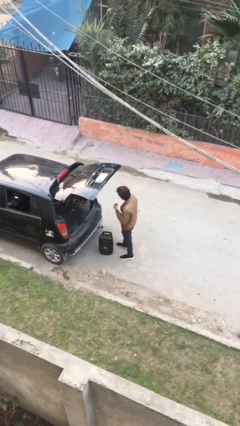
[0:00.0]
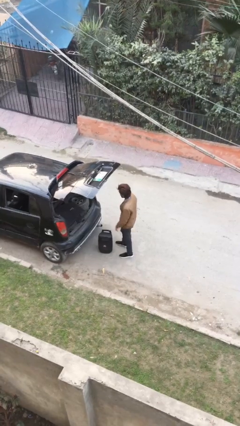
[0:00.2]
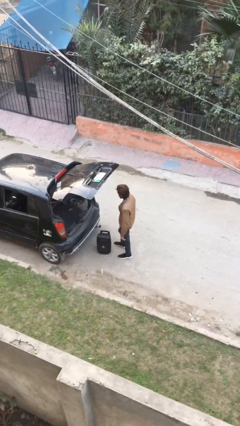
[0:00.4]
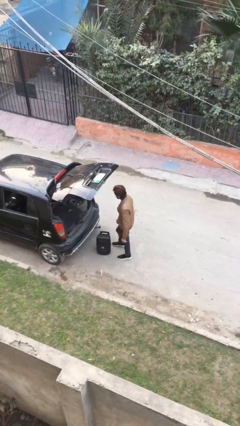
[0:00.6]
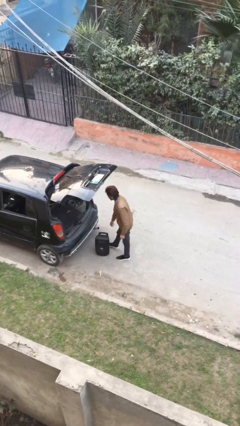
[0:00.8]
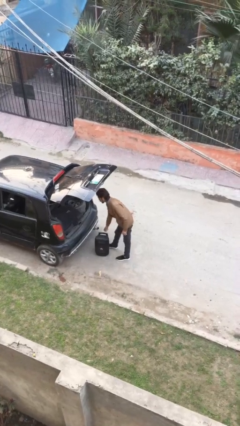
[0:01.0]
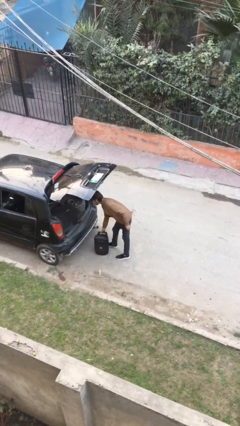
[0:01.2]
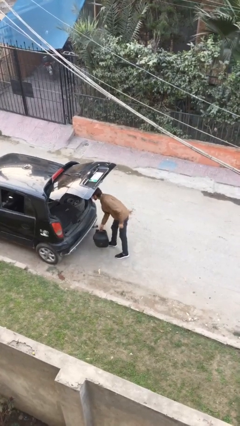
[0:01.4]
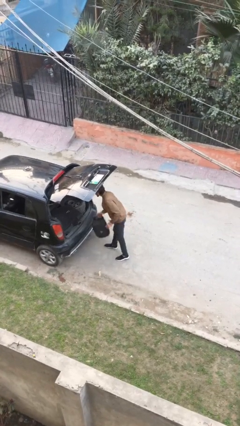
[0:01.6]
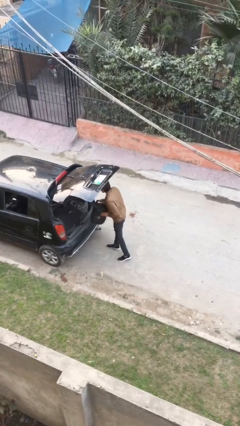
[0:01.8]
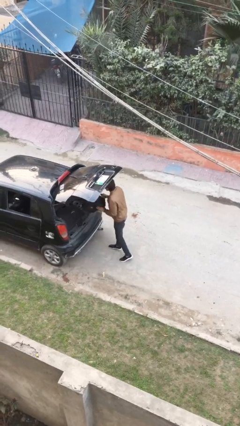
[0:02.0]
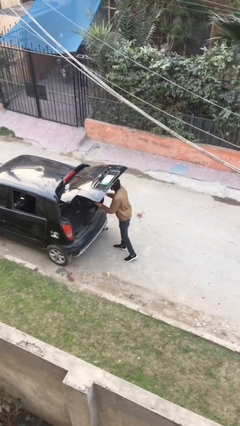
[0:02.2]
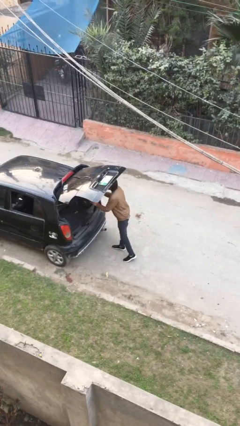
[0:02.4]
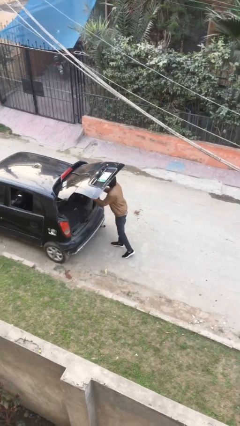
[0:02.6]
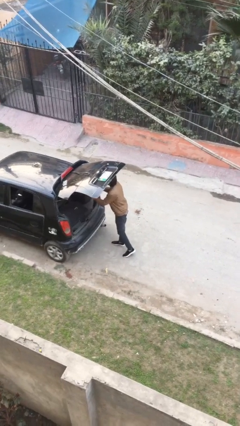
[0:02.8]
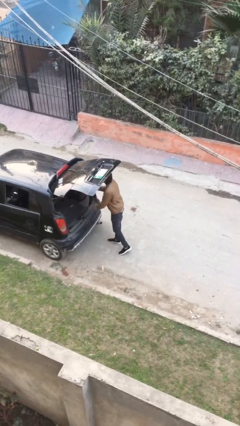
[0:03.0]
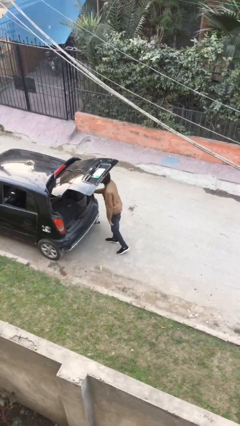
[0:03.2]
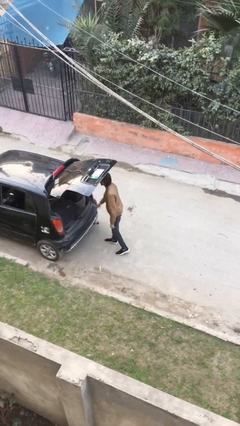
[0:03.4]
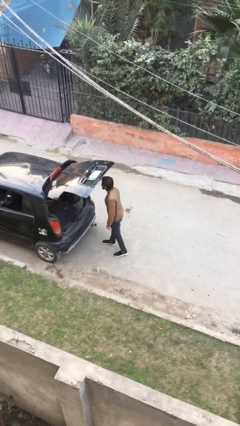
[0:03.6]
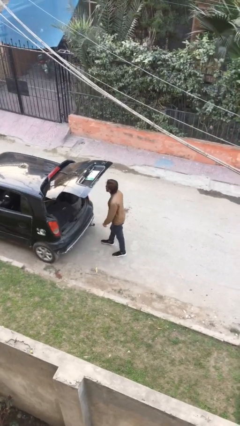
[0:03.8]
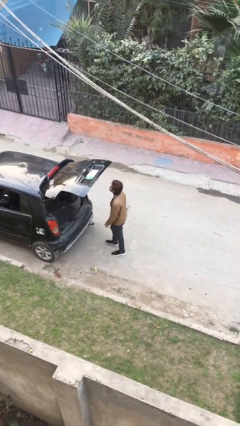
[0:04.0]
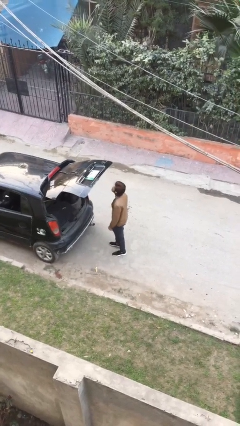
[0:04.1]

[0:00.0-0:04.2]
person loads car

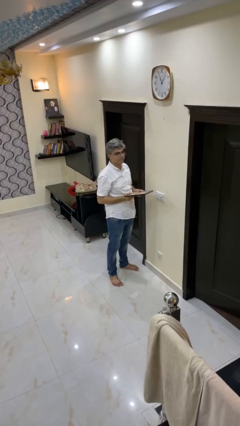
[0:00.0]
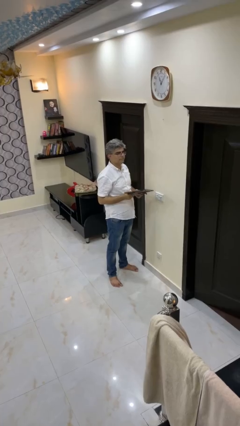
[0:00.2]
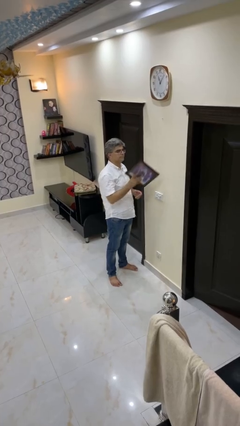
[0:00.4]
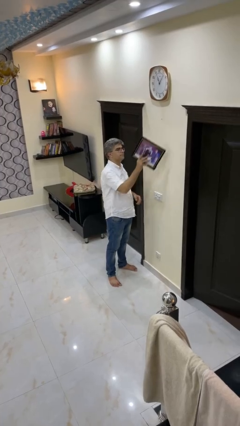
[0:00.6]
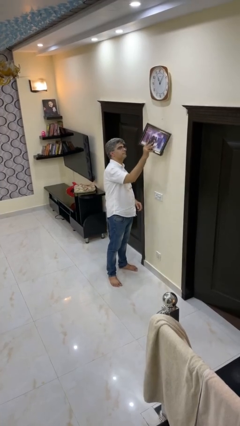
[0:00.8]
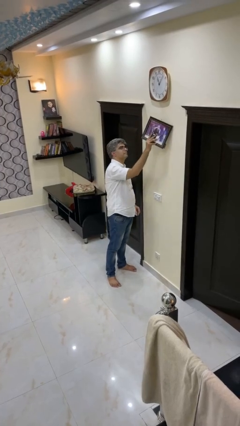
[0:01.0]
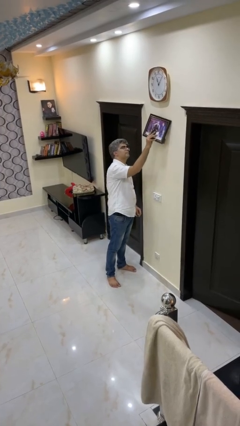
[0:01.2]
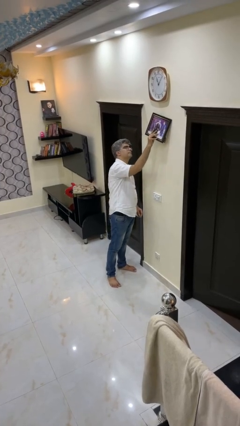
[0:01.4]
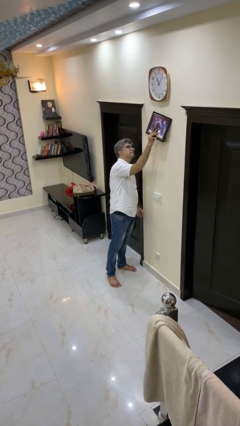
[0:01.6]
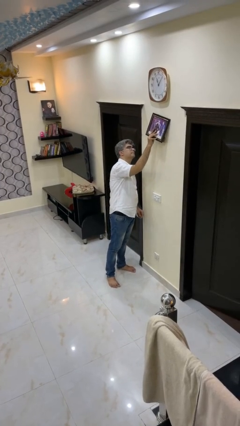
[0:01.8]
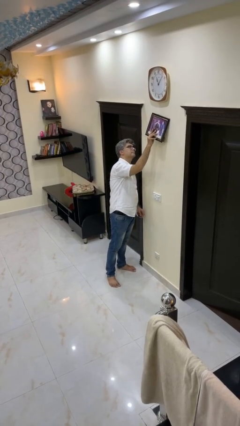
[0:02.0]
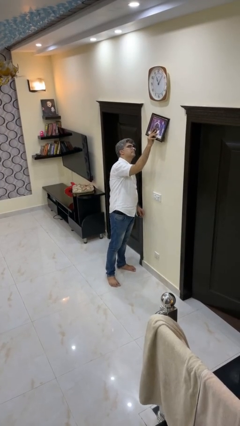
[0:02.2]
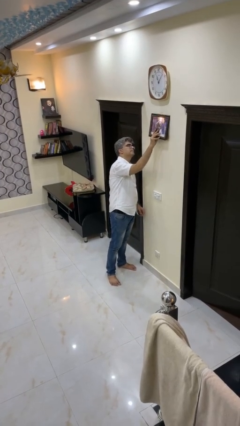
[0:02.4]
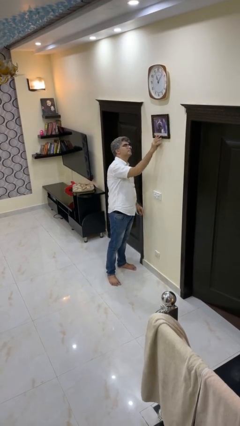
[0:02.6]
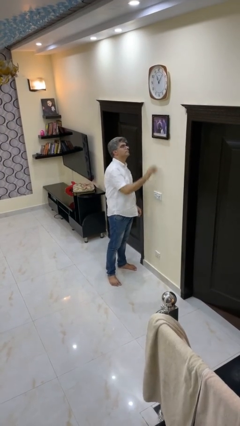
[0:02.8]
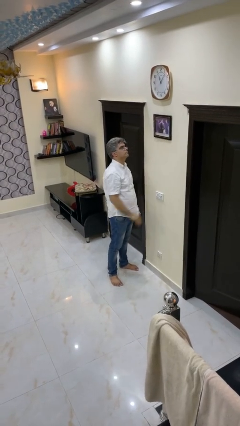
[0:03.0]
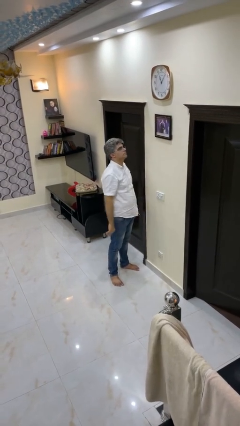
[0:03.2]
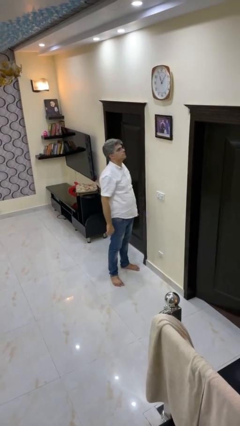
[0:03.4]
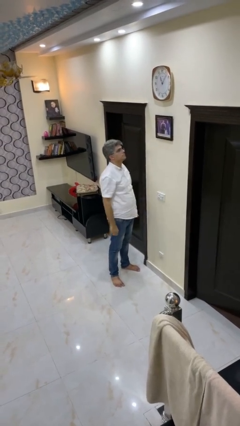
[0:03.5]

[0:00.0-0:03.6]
person puts up picture frame

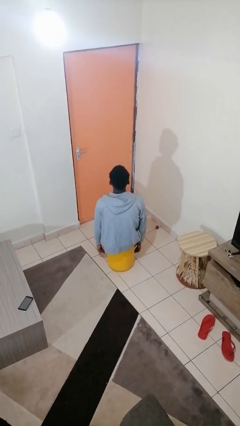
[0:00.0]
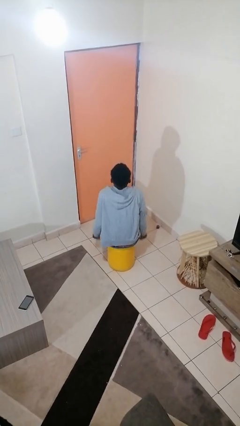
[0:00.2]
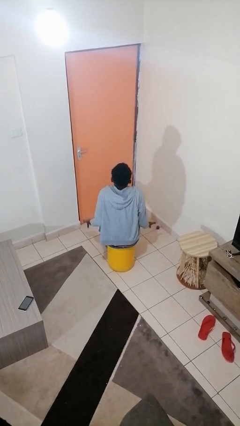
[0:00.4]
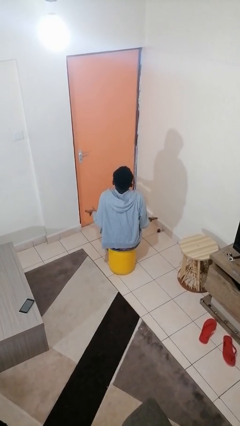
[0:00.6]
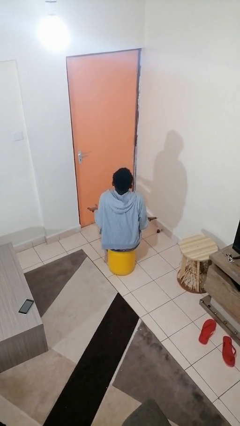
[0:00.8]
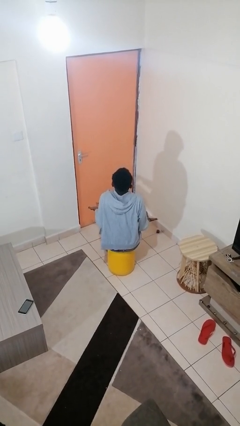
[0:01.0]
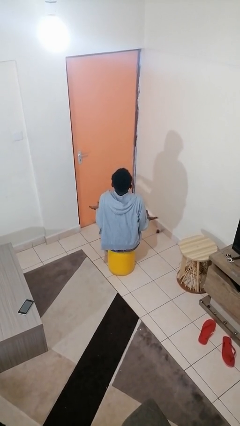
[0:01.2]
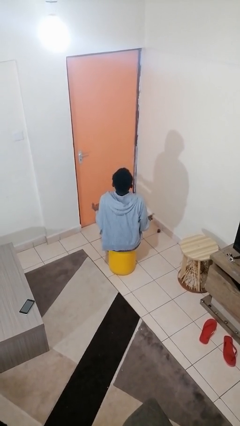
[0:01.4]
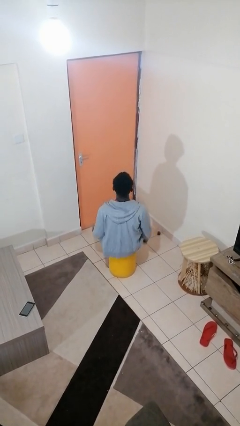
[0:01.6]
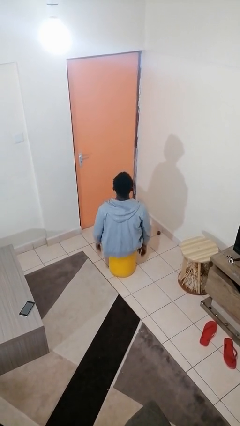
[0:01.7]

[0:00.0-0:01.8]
person shrugs

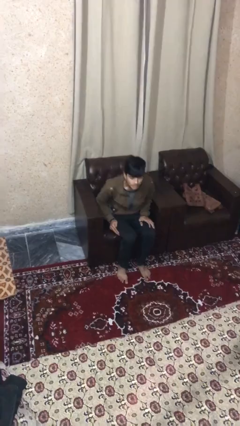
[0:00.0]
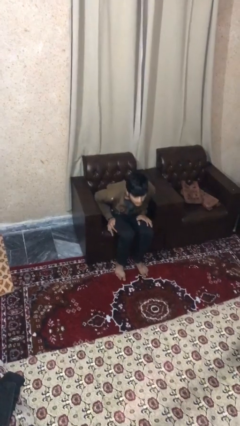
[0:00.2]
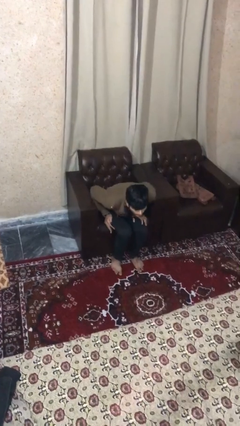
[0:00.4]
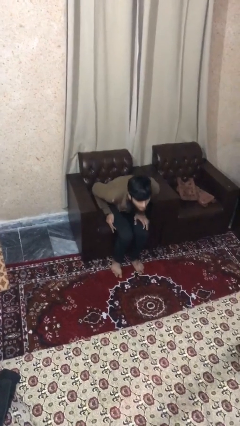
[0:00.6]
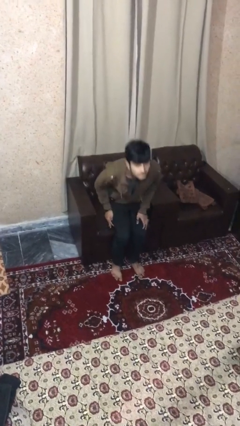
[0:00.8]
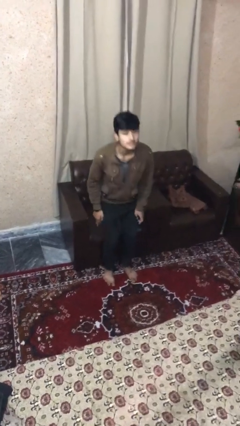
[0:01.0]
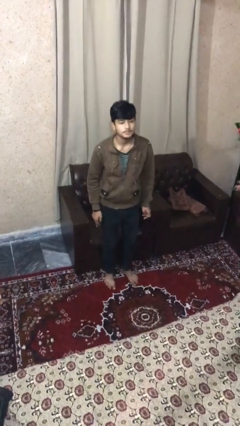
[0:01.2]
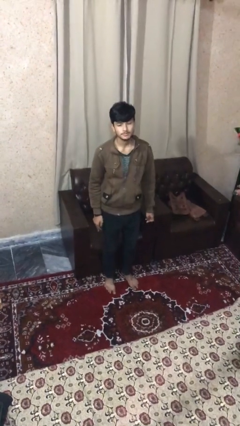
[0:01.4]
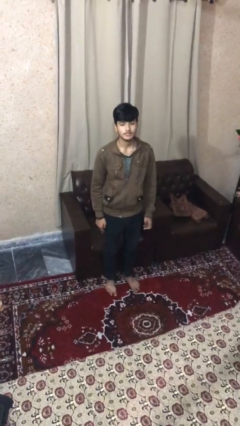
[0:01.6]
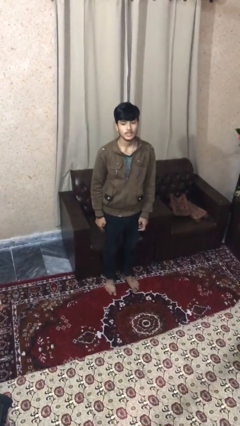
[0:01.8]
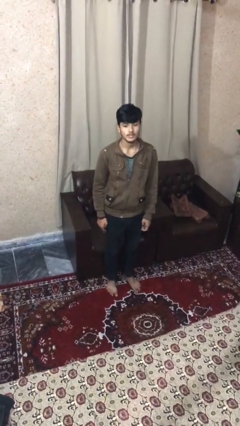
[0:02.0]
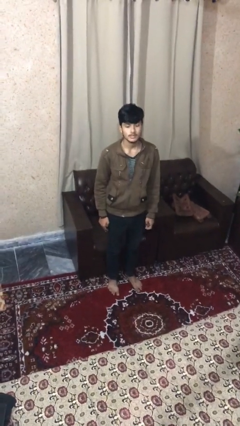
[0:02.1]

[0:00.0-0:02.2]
person stands up

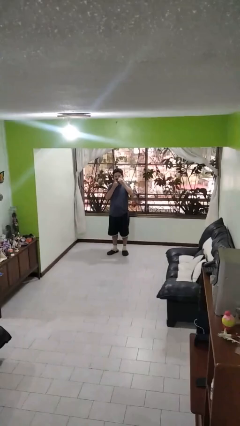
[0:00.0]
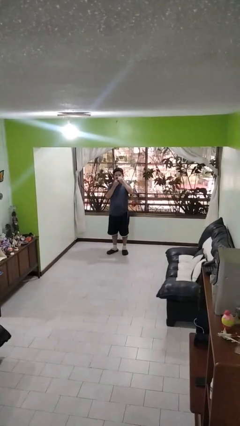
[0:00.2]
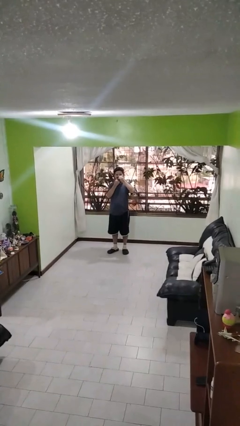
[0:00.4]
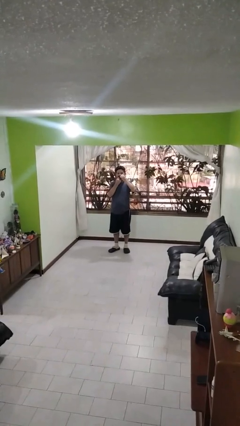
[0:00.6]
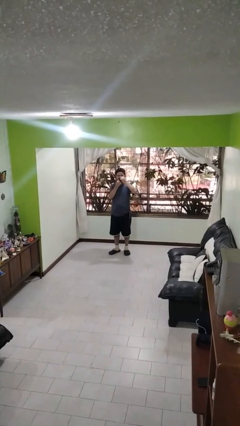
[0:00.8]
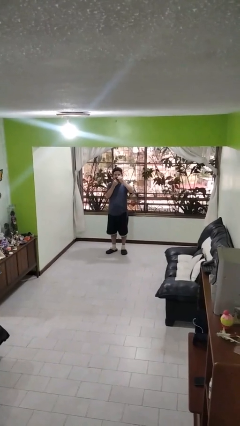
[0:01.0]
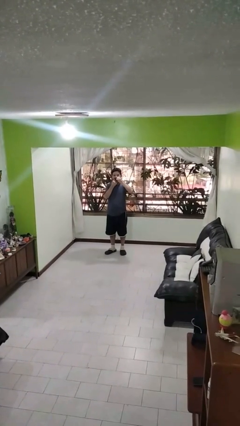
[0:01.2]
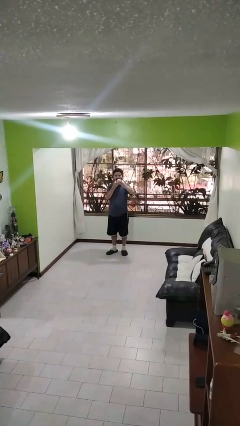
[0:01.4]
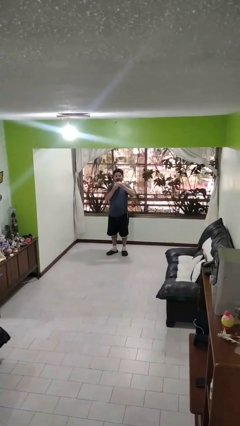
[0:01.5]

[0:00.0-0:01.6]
person flosses

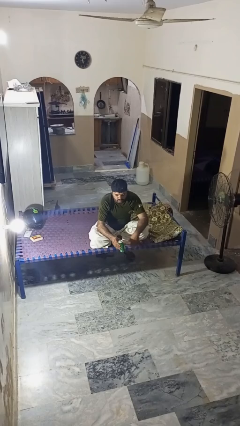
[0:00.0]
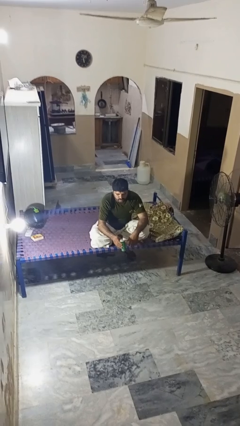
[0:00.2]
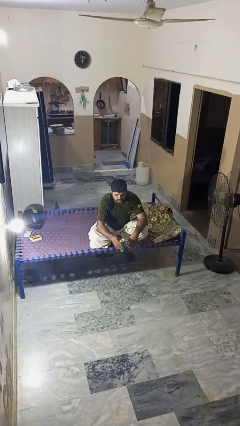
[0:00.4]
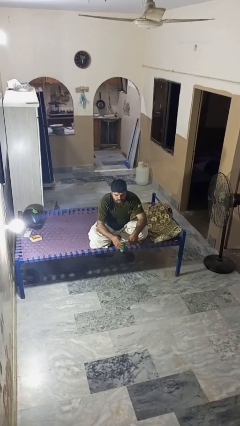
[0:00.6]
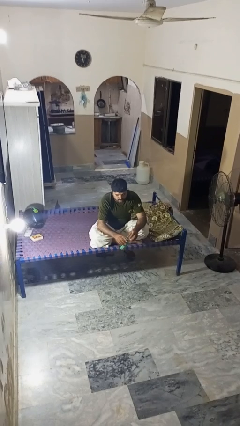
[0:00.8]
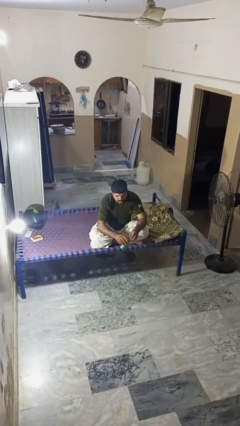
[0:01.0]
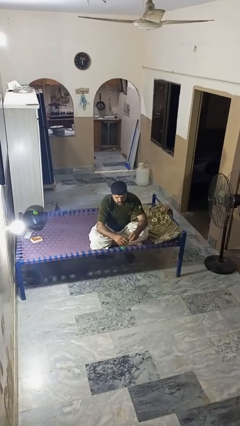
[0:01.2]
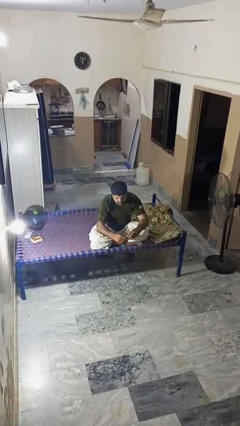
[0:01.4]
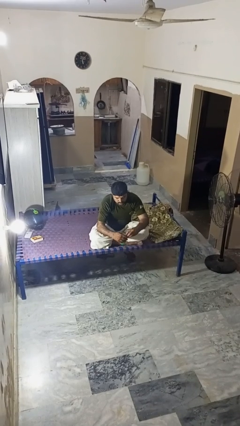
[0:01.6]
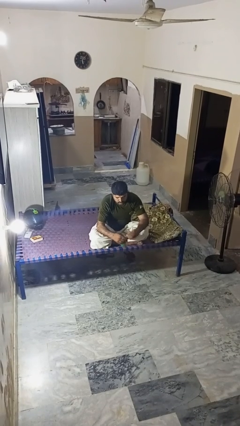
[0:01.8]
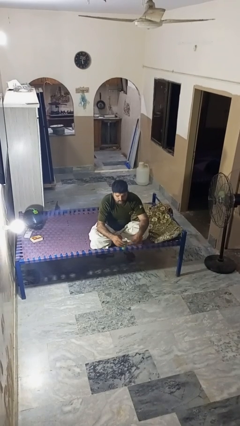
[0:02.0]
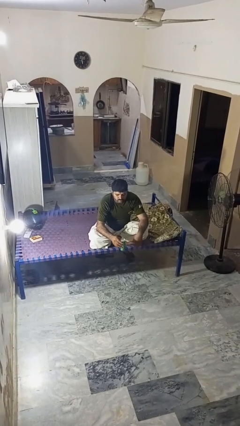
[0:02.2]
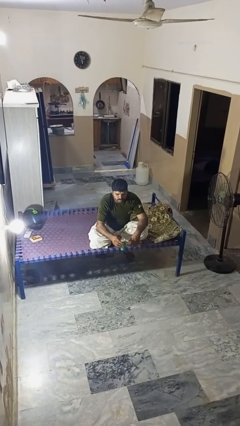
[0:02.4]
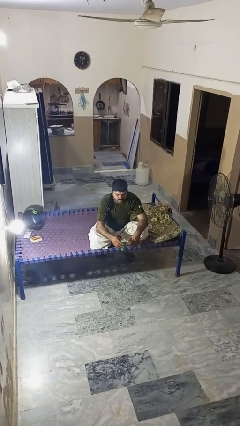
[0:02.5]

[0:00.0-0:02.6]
person opens beverage can

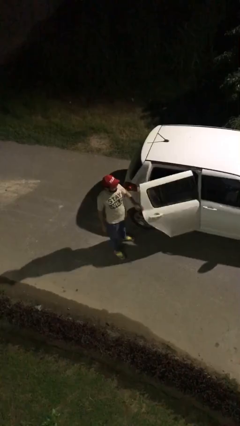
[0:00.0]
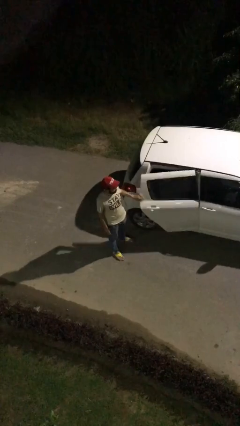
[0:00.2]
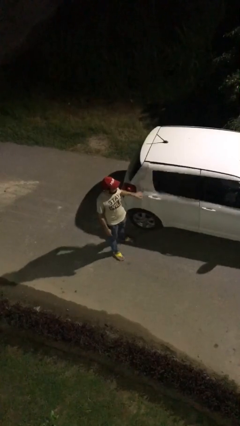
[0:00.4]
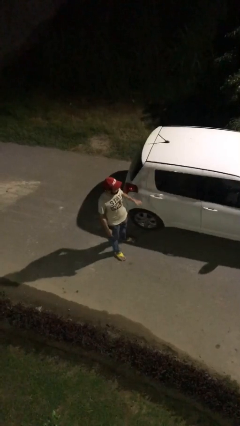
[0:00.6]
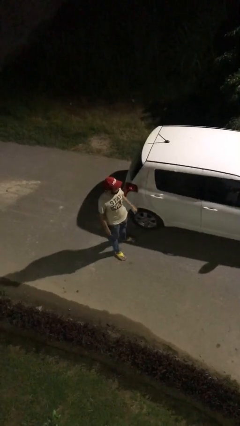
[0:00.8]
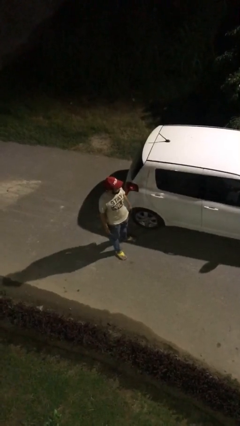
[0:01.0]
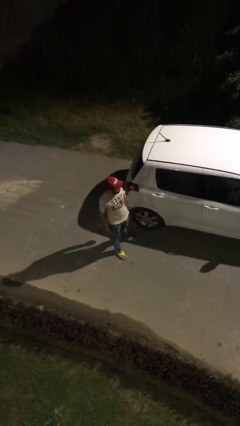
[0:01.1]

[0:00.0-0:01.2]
person closes car door
